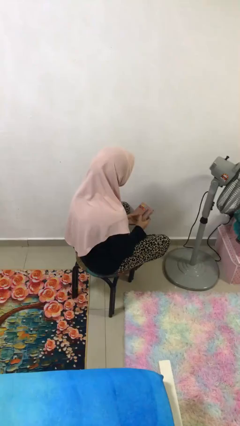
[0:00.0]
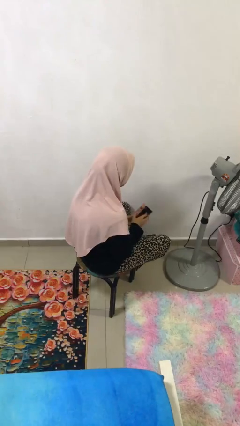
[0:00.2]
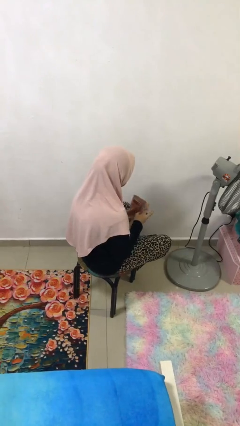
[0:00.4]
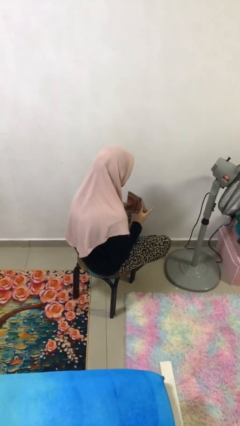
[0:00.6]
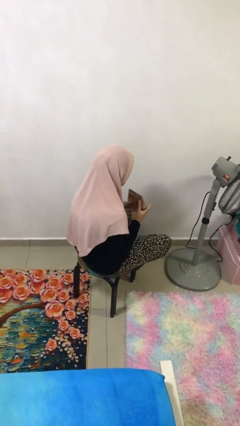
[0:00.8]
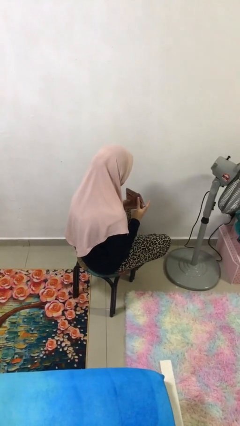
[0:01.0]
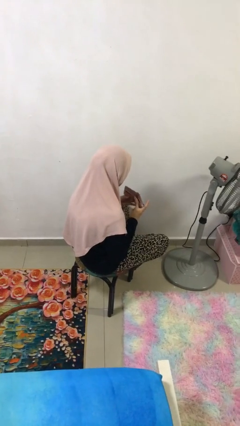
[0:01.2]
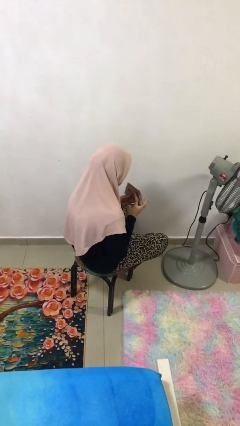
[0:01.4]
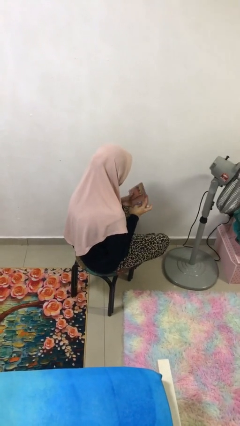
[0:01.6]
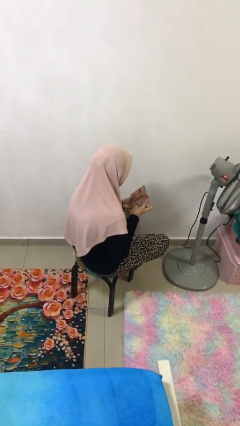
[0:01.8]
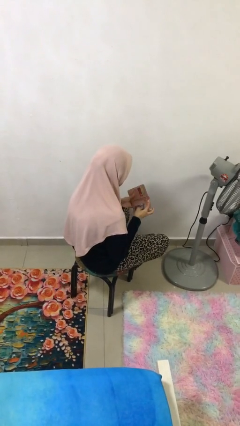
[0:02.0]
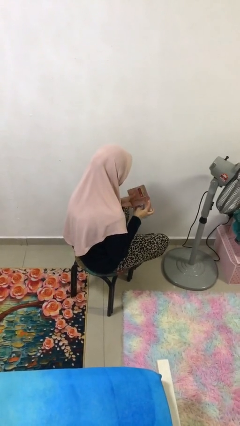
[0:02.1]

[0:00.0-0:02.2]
person searches in purse

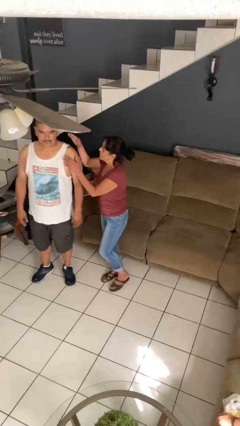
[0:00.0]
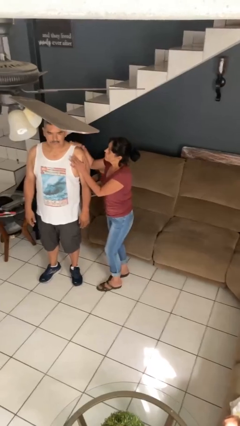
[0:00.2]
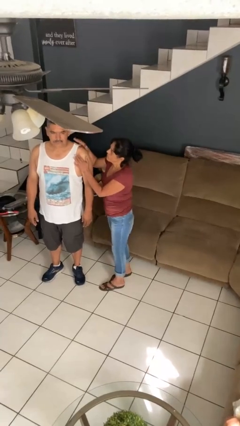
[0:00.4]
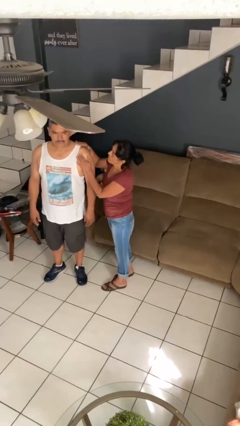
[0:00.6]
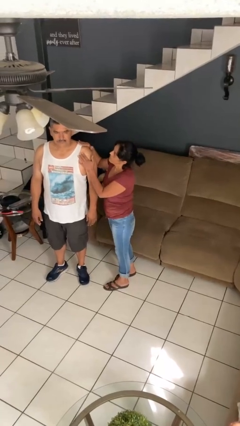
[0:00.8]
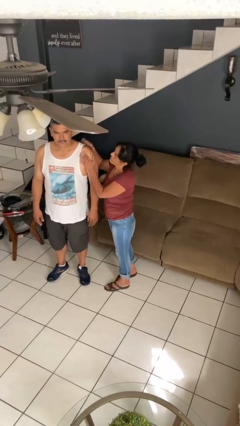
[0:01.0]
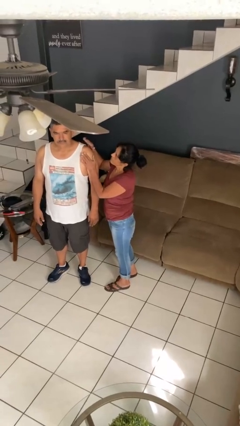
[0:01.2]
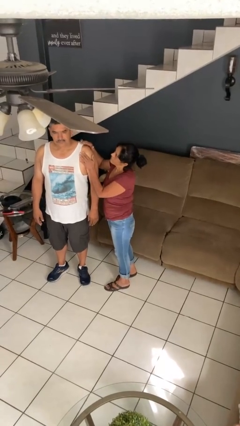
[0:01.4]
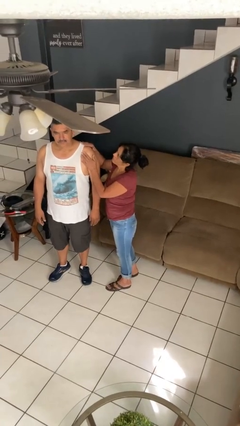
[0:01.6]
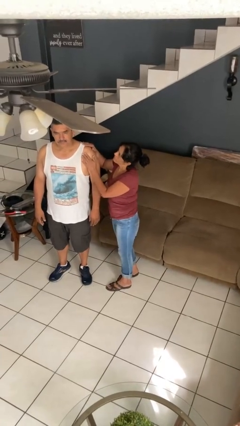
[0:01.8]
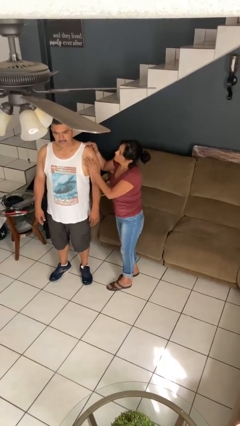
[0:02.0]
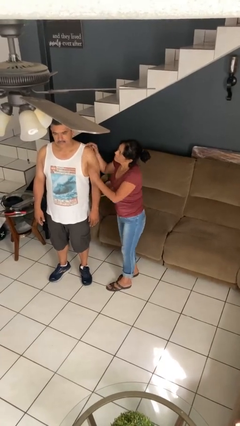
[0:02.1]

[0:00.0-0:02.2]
person pounds shoulders of person

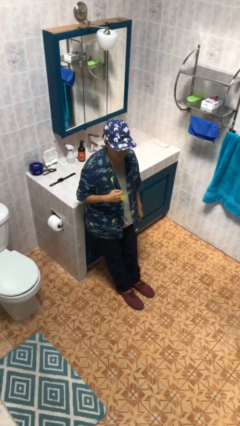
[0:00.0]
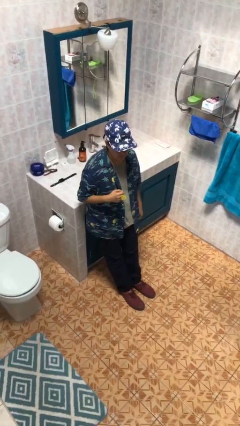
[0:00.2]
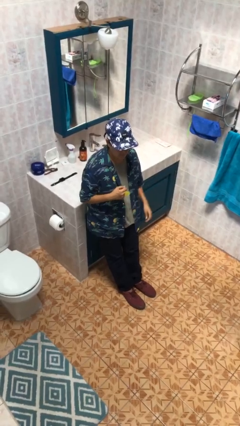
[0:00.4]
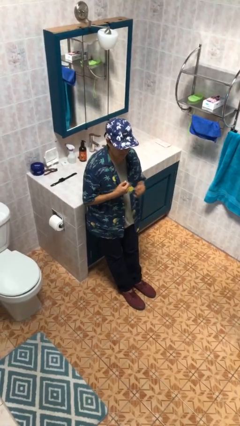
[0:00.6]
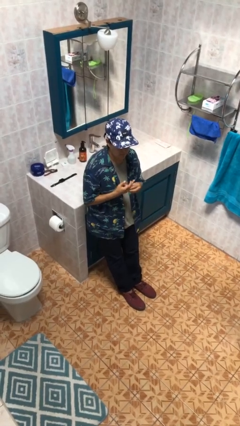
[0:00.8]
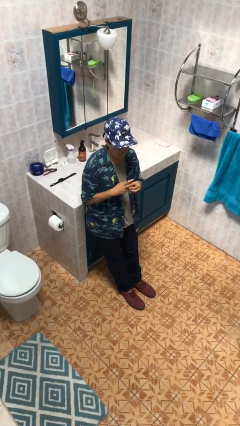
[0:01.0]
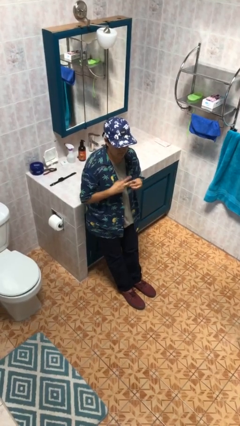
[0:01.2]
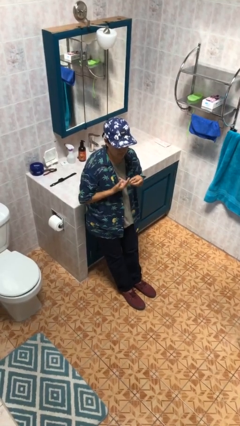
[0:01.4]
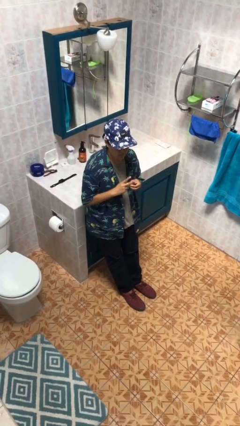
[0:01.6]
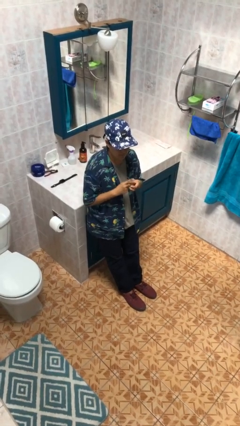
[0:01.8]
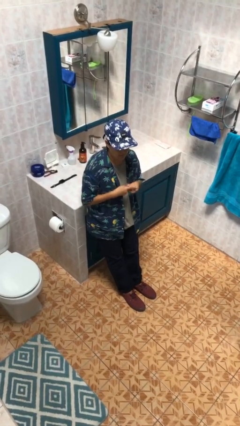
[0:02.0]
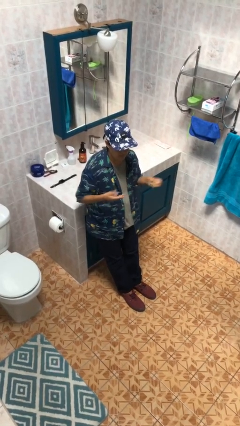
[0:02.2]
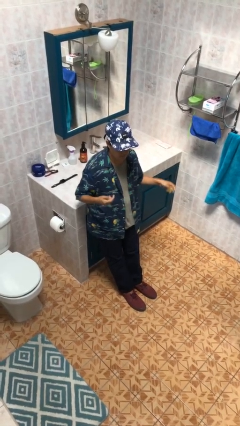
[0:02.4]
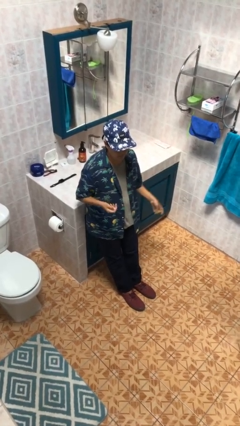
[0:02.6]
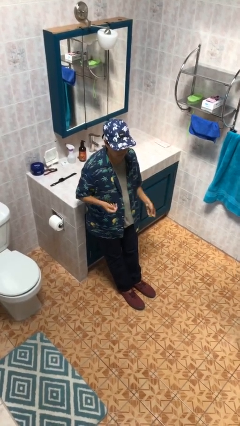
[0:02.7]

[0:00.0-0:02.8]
person takes off ring

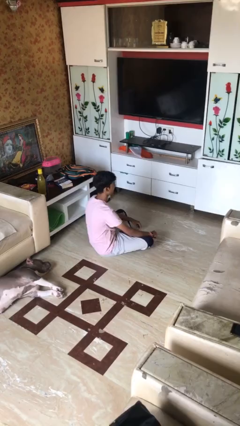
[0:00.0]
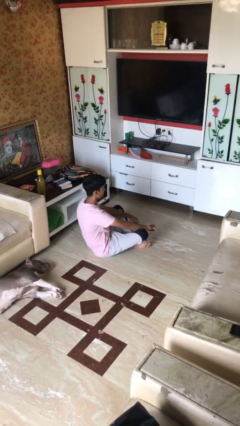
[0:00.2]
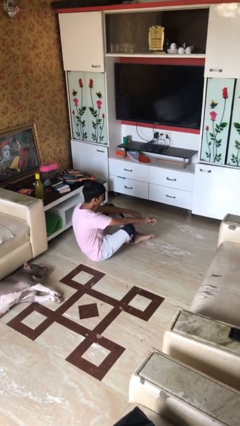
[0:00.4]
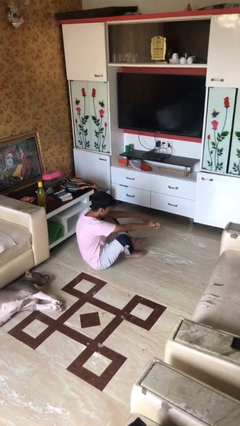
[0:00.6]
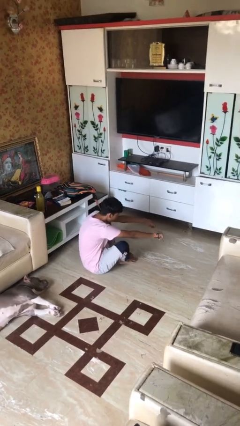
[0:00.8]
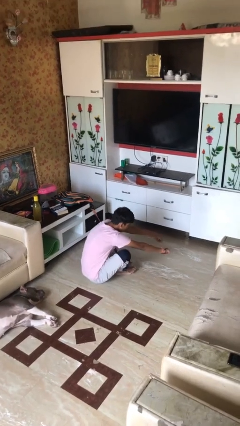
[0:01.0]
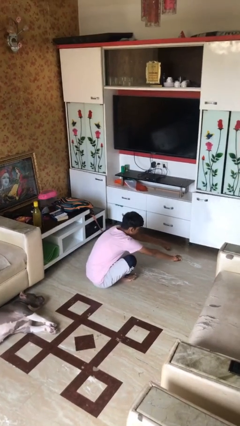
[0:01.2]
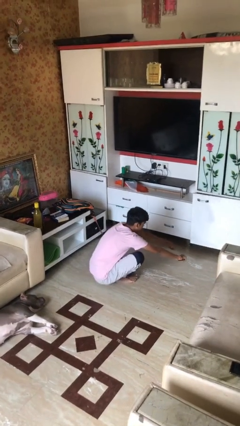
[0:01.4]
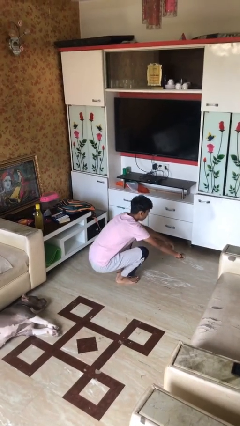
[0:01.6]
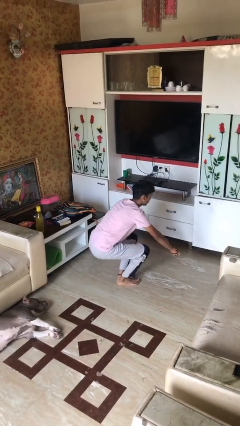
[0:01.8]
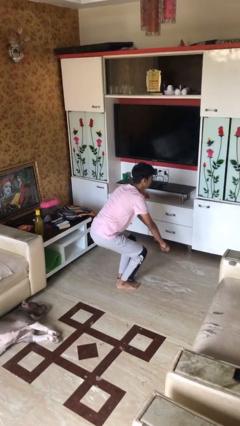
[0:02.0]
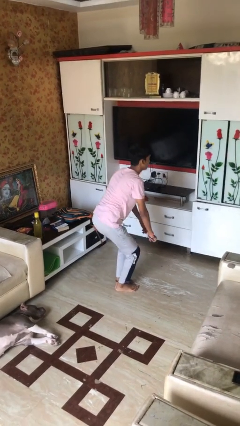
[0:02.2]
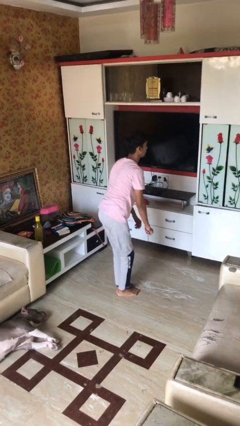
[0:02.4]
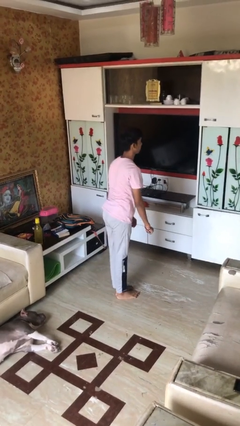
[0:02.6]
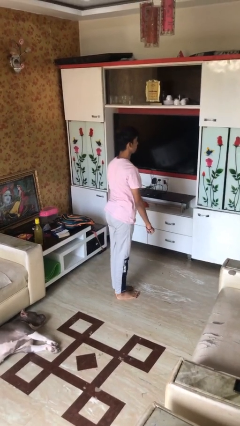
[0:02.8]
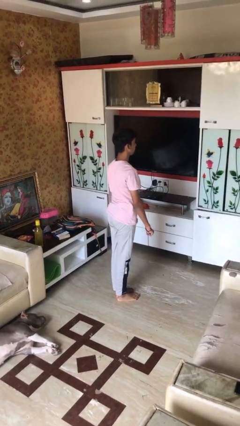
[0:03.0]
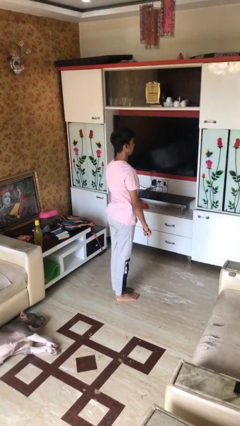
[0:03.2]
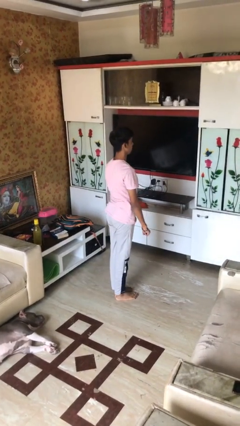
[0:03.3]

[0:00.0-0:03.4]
person stands up from floor

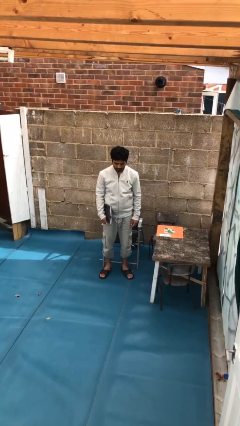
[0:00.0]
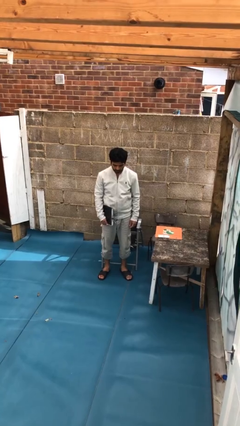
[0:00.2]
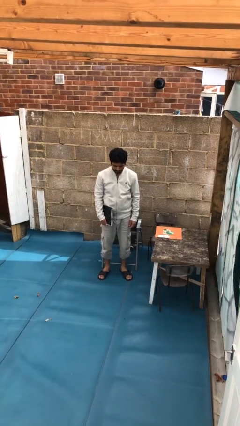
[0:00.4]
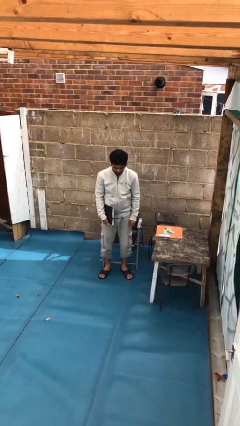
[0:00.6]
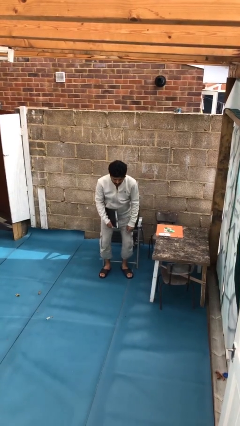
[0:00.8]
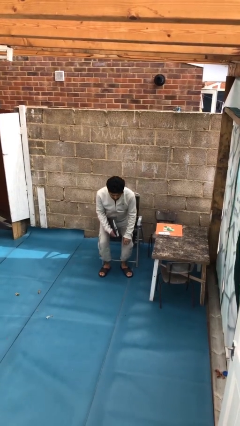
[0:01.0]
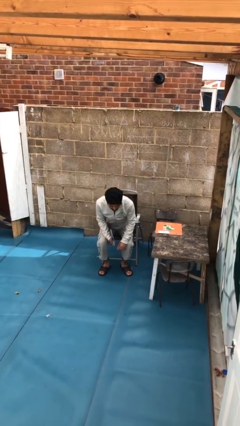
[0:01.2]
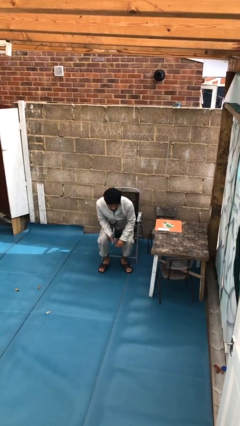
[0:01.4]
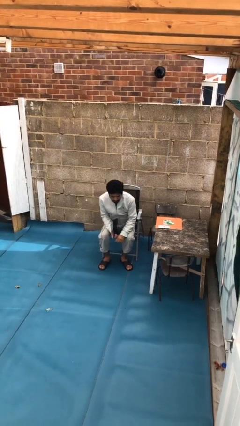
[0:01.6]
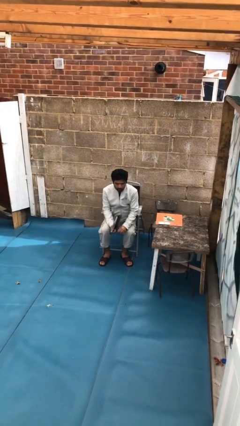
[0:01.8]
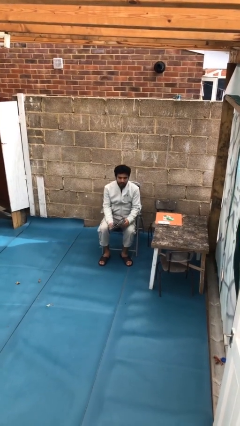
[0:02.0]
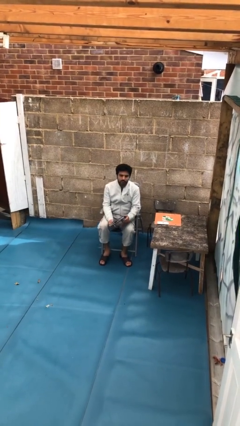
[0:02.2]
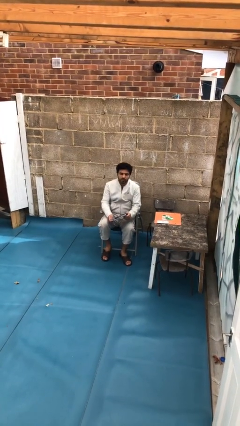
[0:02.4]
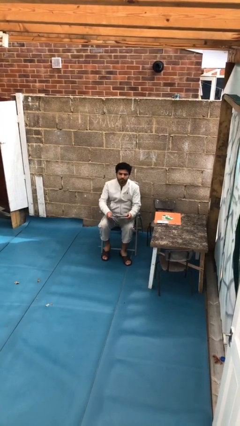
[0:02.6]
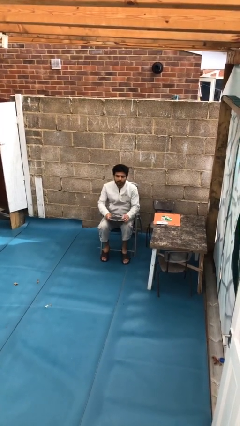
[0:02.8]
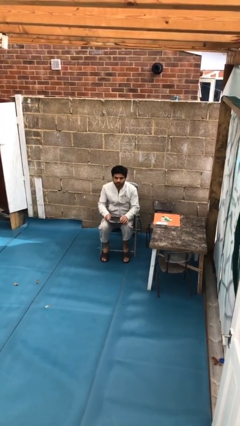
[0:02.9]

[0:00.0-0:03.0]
person sits down

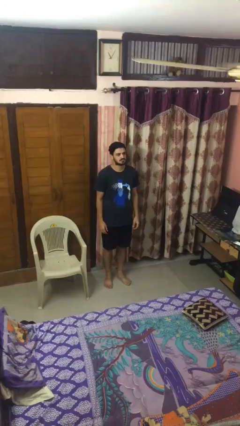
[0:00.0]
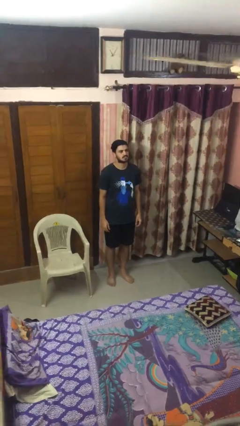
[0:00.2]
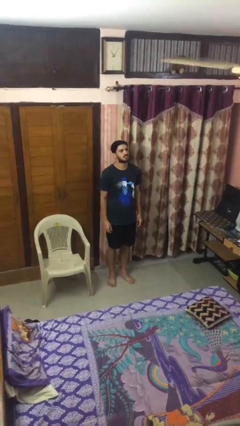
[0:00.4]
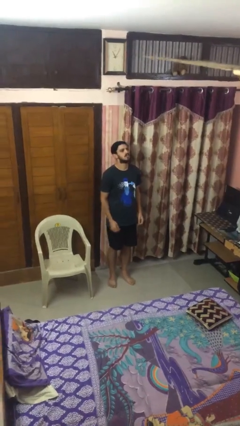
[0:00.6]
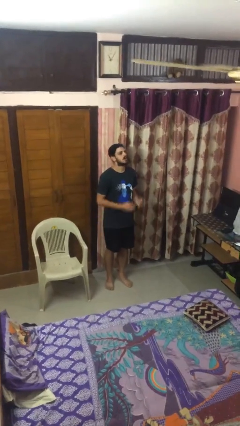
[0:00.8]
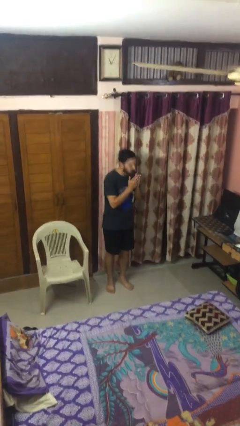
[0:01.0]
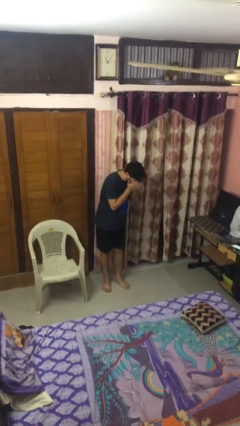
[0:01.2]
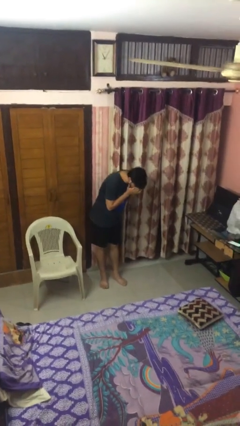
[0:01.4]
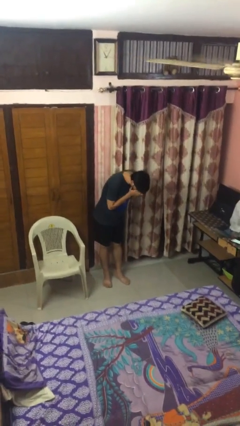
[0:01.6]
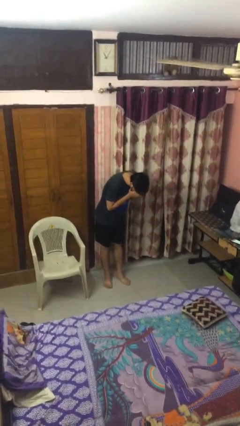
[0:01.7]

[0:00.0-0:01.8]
person sneezes into hand

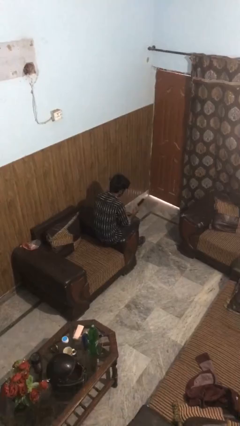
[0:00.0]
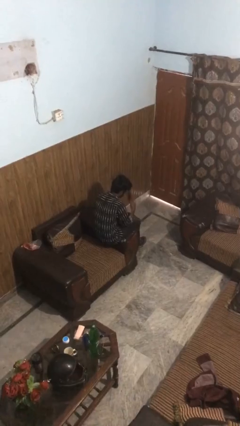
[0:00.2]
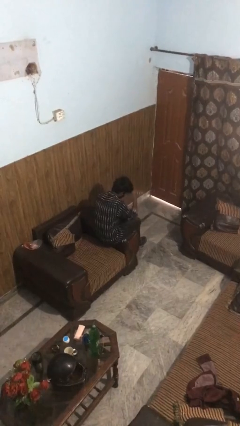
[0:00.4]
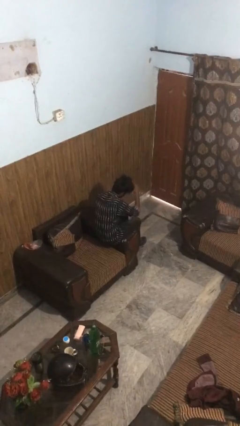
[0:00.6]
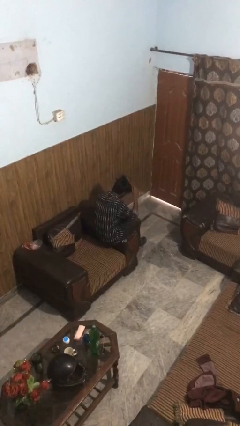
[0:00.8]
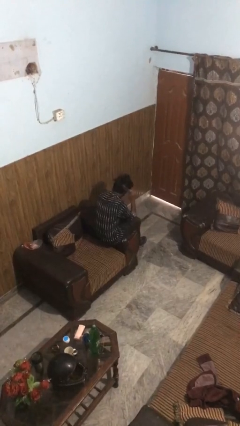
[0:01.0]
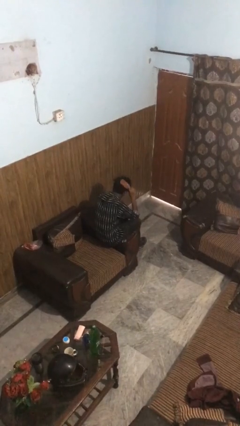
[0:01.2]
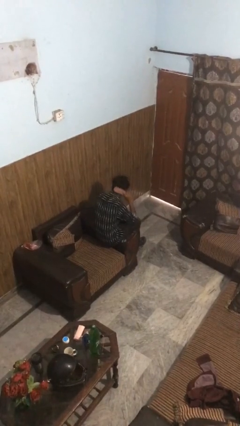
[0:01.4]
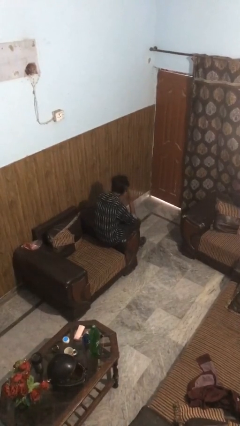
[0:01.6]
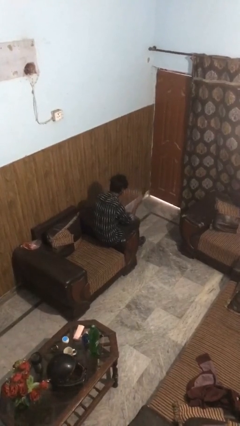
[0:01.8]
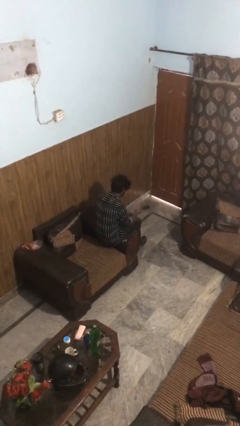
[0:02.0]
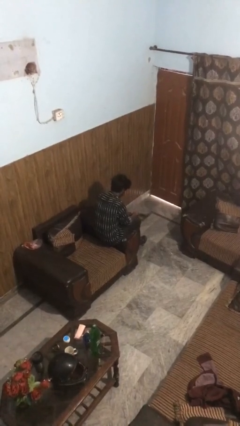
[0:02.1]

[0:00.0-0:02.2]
person brushes hair
